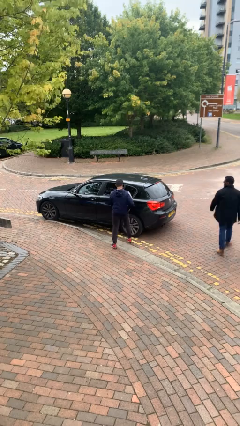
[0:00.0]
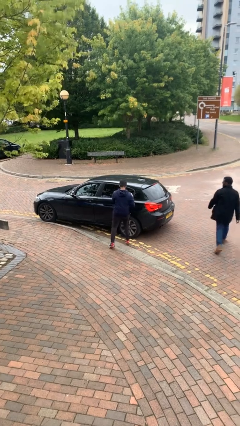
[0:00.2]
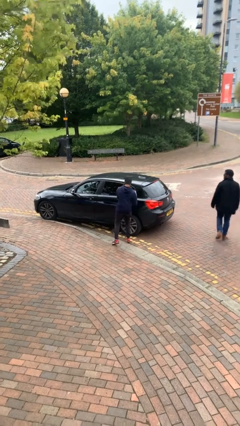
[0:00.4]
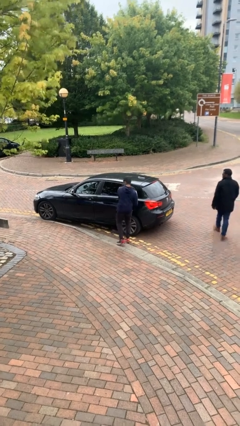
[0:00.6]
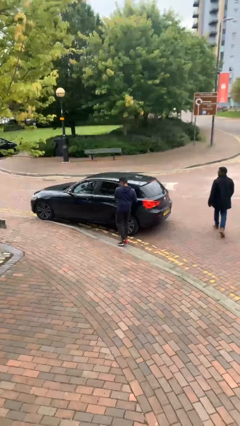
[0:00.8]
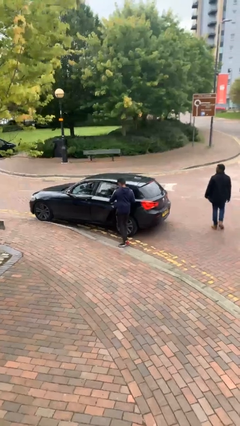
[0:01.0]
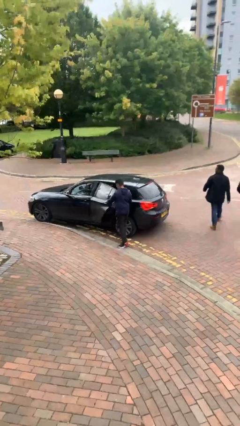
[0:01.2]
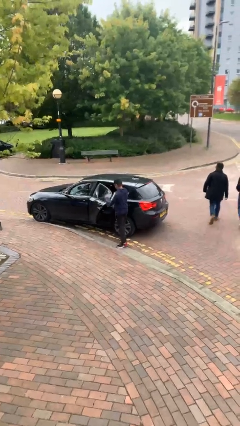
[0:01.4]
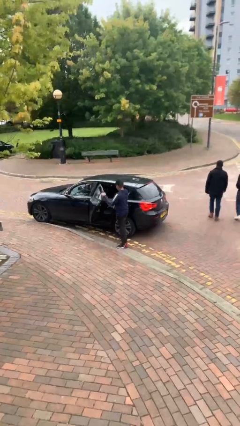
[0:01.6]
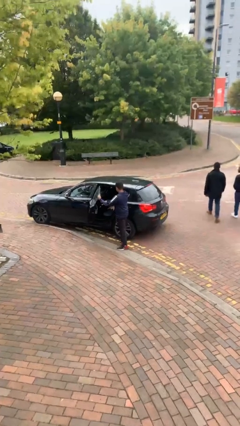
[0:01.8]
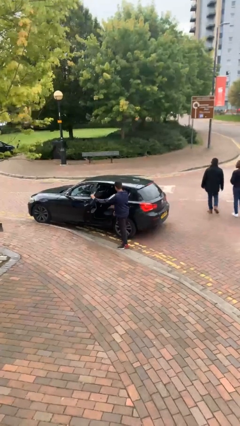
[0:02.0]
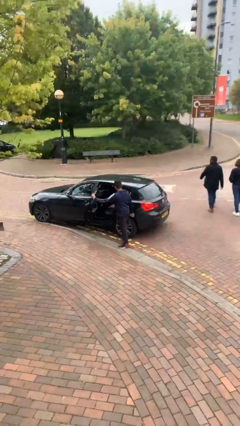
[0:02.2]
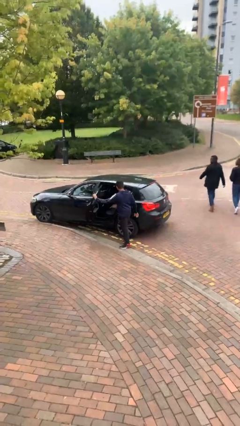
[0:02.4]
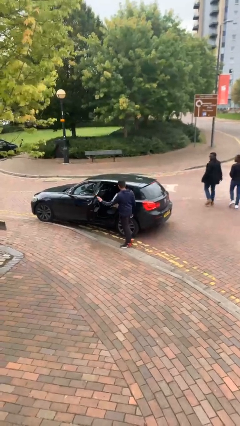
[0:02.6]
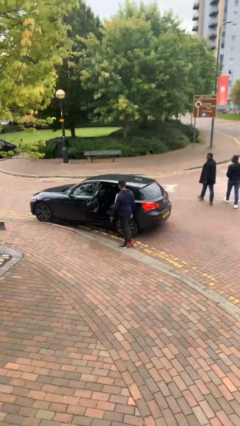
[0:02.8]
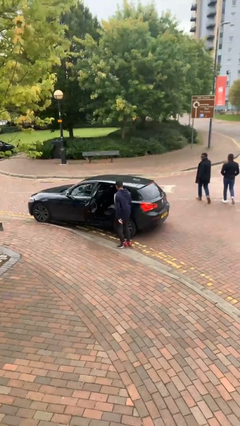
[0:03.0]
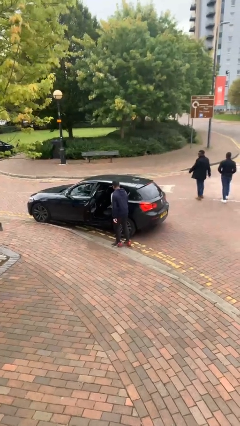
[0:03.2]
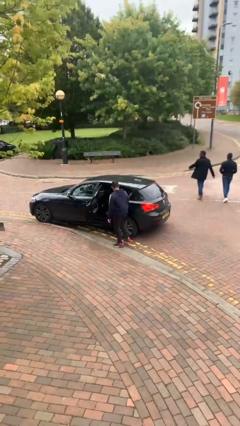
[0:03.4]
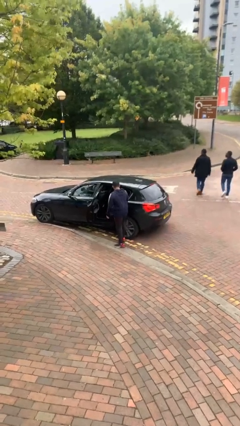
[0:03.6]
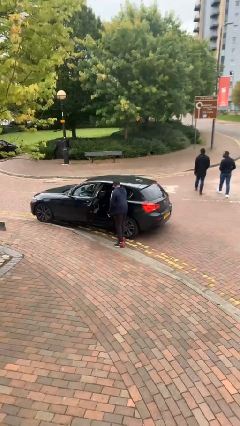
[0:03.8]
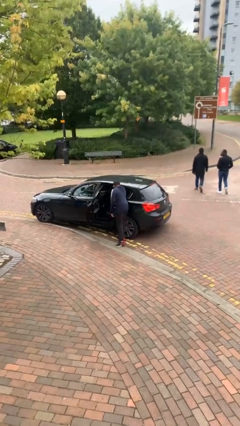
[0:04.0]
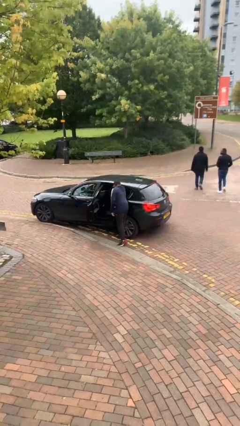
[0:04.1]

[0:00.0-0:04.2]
person opens car door

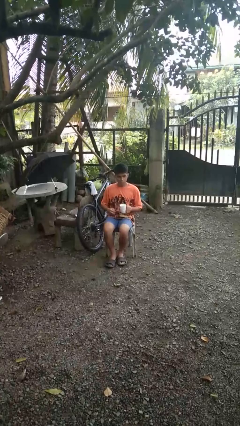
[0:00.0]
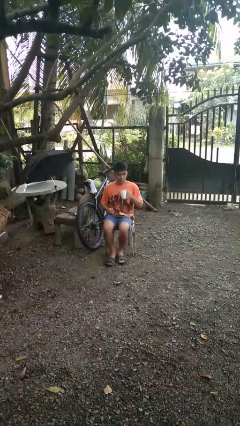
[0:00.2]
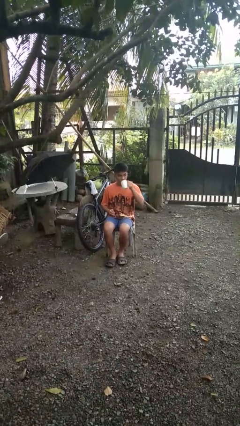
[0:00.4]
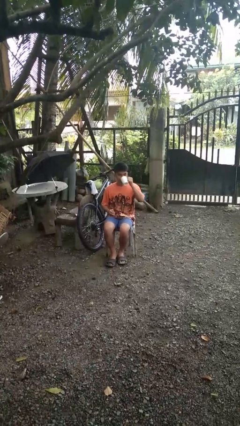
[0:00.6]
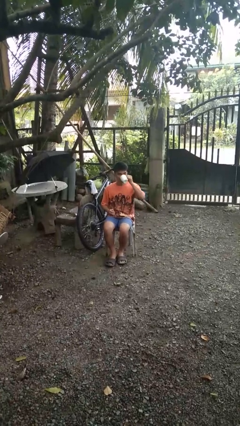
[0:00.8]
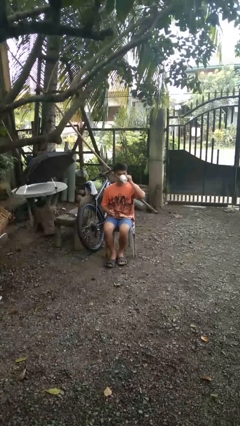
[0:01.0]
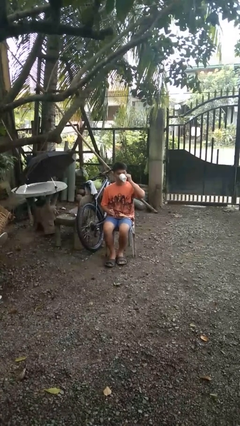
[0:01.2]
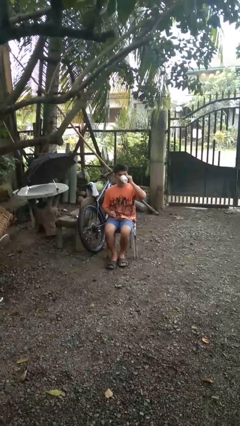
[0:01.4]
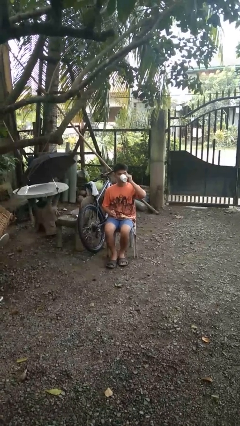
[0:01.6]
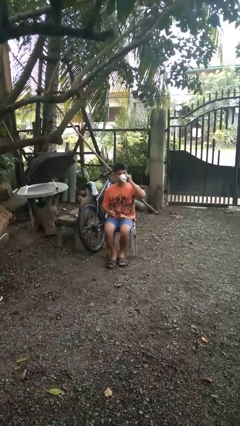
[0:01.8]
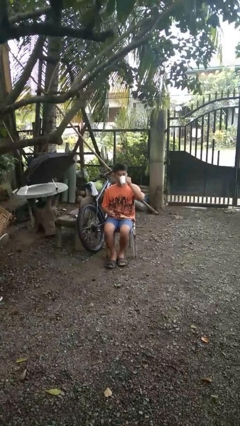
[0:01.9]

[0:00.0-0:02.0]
person drinks from mug

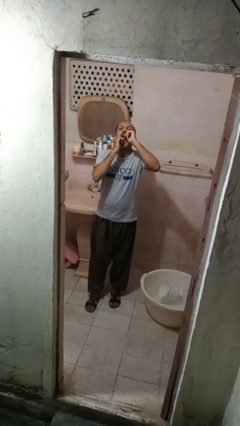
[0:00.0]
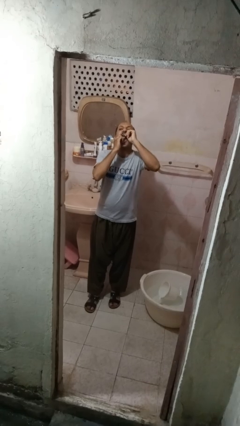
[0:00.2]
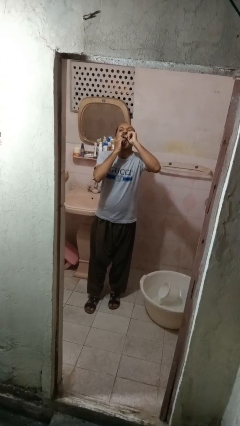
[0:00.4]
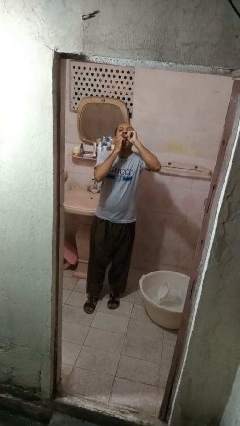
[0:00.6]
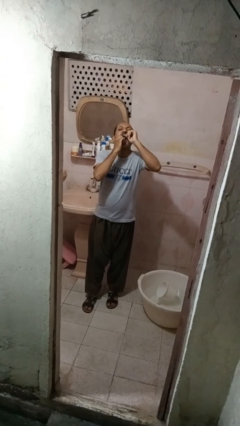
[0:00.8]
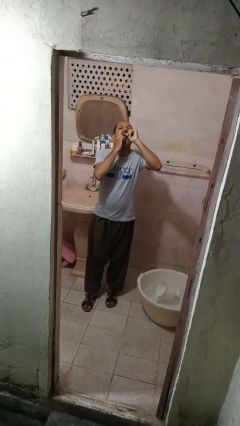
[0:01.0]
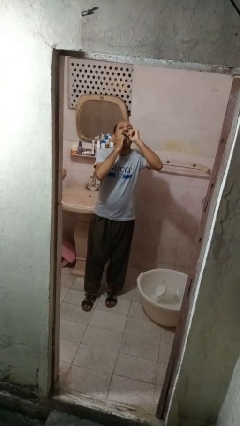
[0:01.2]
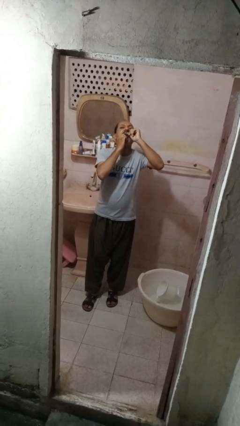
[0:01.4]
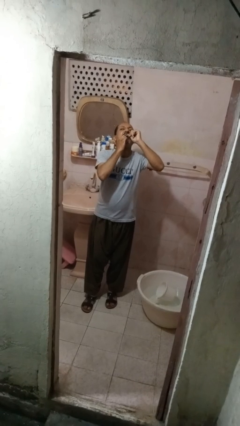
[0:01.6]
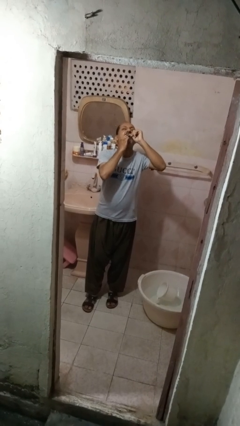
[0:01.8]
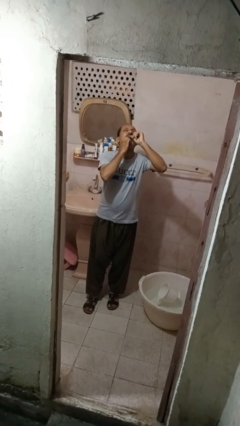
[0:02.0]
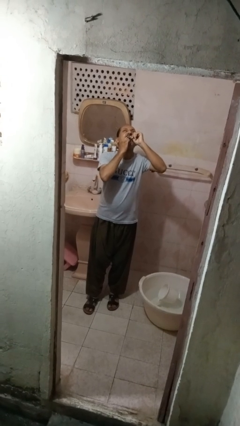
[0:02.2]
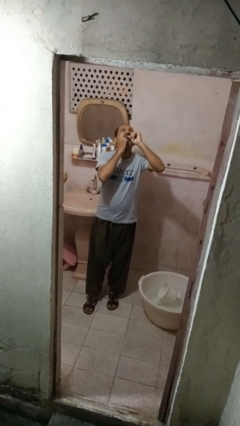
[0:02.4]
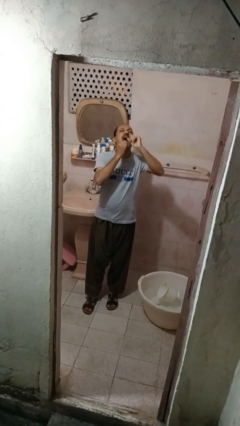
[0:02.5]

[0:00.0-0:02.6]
person flosses

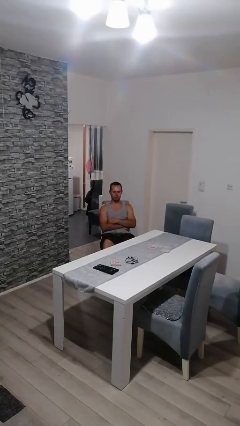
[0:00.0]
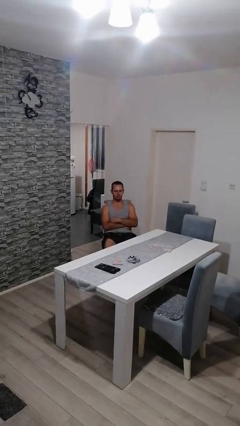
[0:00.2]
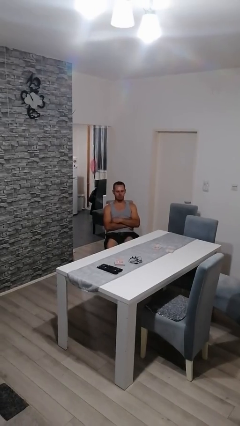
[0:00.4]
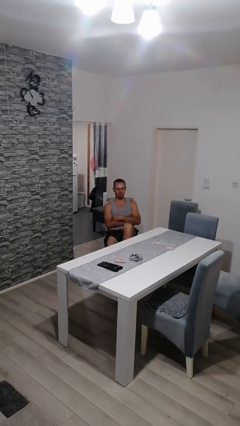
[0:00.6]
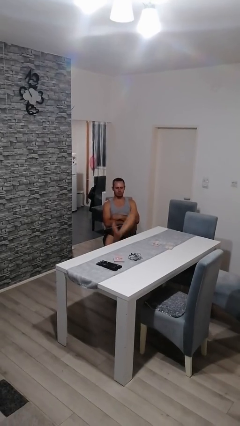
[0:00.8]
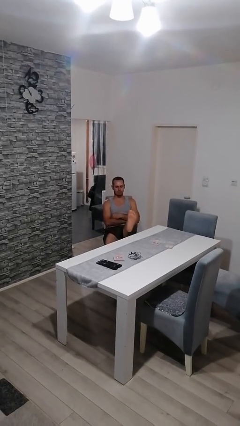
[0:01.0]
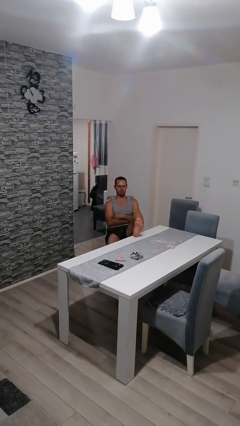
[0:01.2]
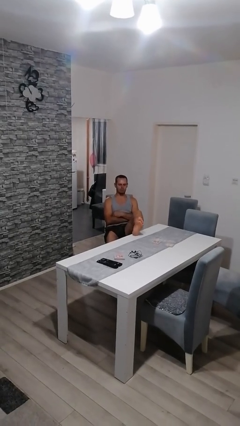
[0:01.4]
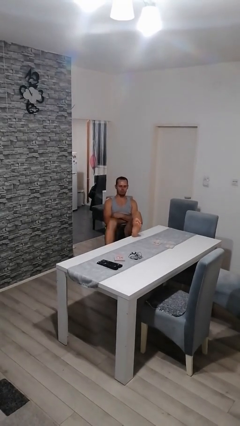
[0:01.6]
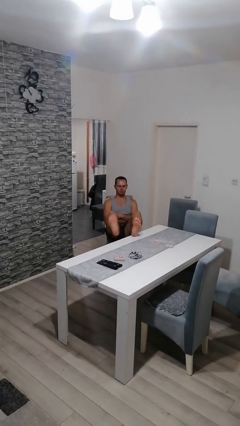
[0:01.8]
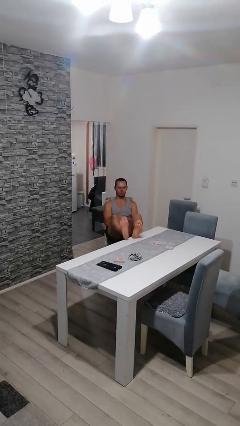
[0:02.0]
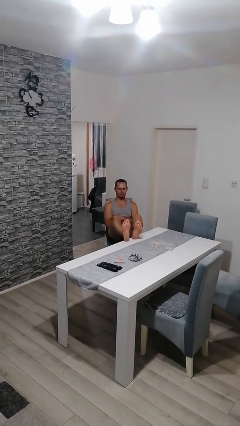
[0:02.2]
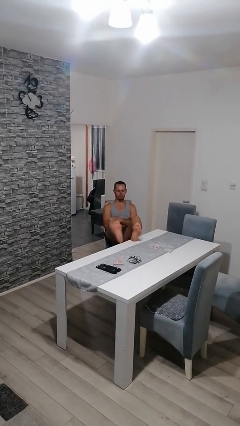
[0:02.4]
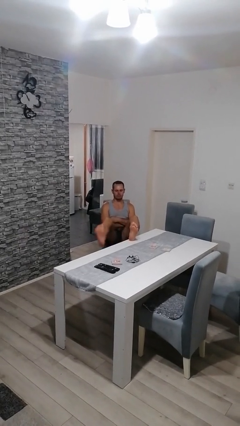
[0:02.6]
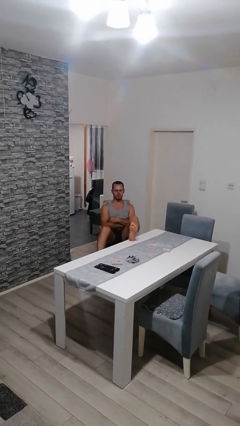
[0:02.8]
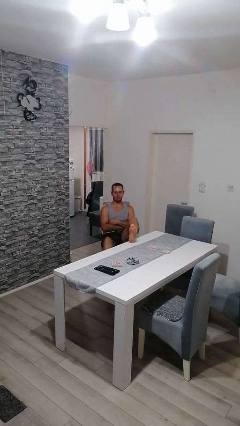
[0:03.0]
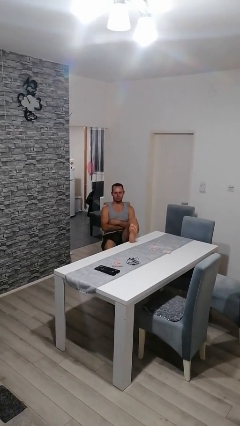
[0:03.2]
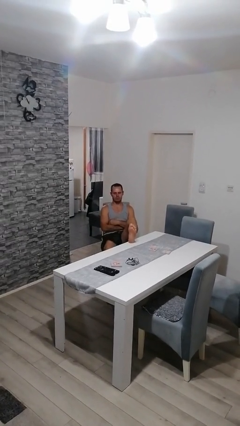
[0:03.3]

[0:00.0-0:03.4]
person puts feet up

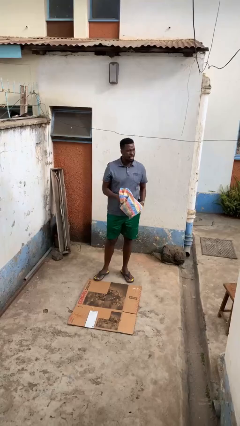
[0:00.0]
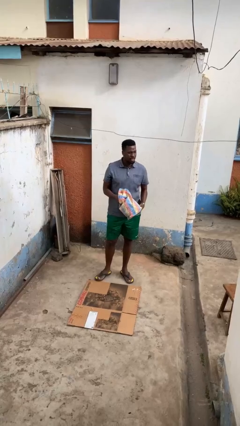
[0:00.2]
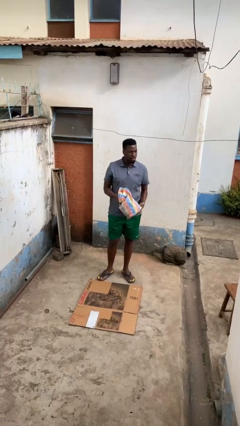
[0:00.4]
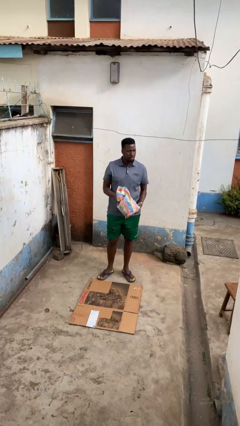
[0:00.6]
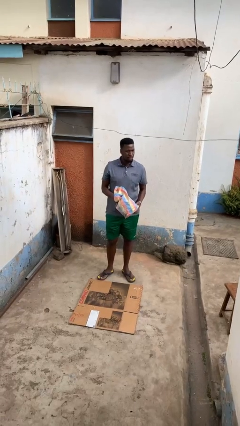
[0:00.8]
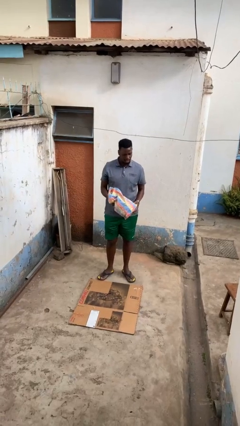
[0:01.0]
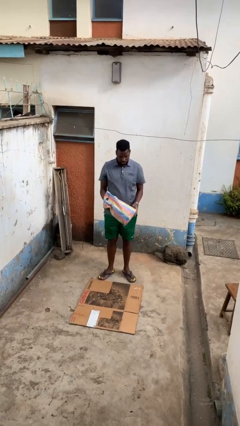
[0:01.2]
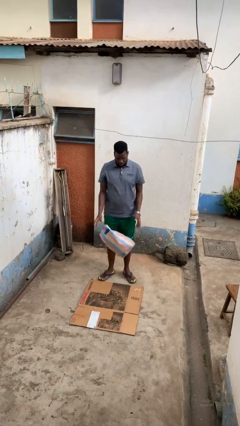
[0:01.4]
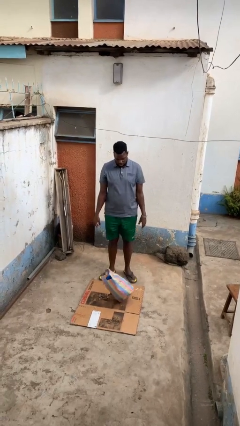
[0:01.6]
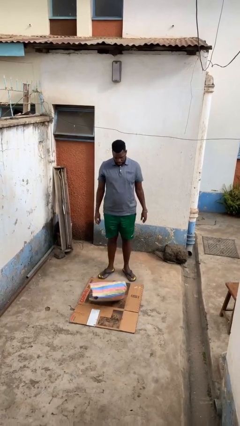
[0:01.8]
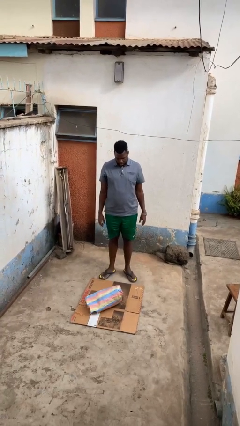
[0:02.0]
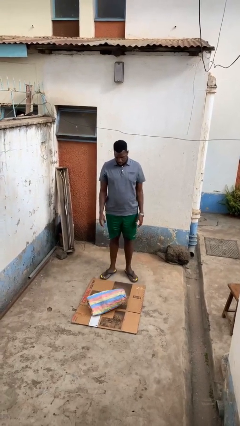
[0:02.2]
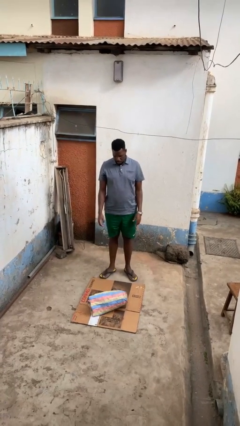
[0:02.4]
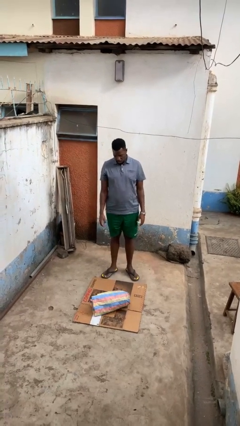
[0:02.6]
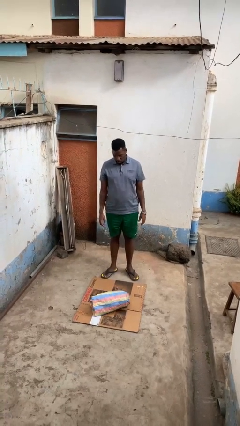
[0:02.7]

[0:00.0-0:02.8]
person drops object

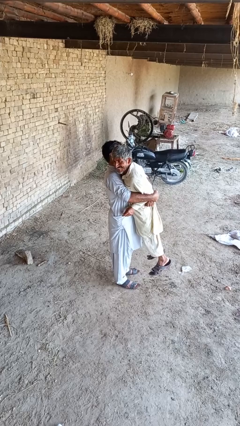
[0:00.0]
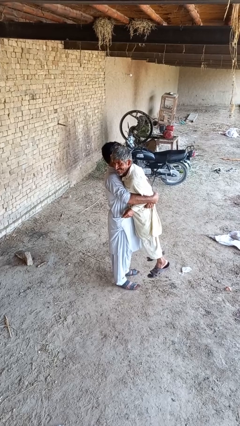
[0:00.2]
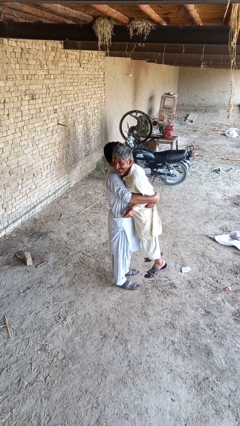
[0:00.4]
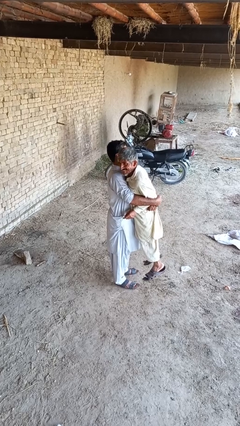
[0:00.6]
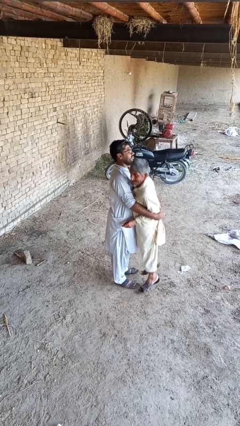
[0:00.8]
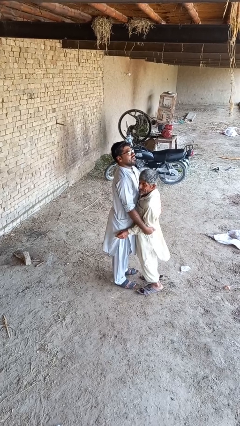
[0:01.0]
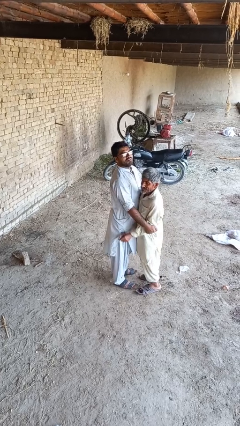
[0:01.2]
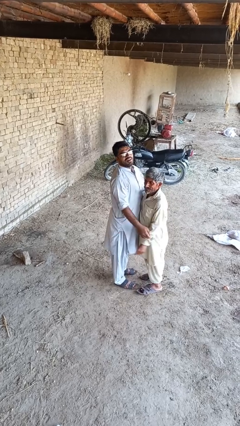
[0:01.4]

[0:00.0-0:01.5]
person puts down person

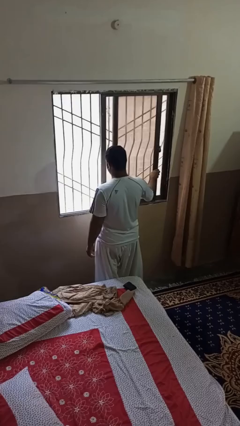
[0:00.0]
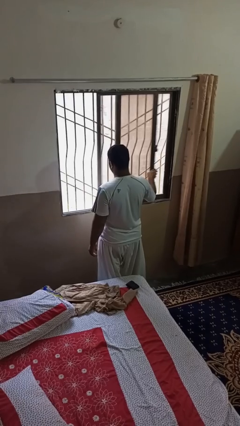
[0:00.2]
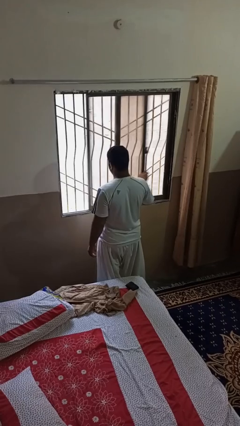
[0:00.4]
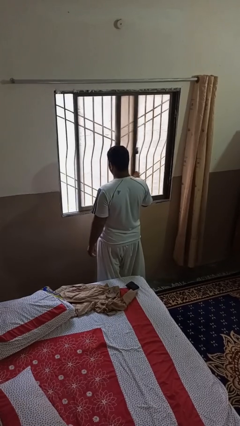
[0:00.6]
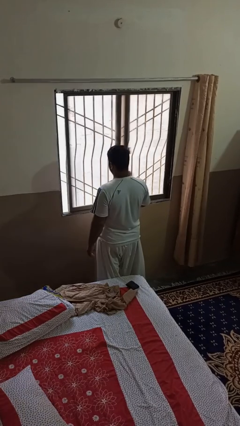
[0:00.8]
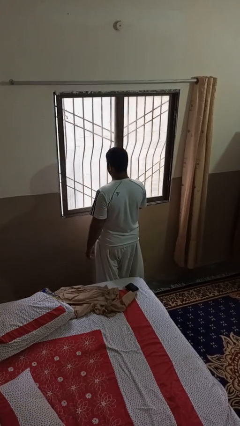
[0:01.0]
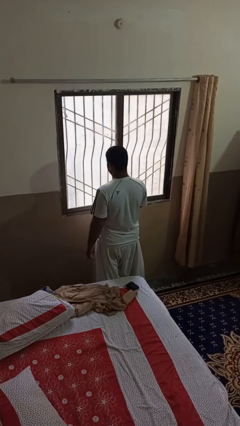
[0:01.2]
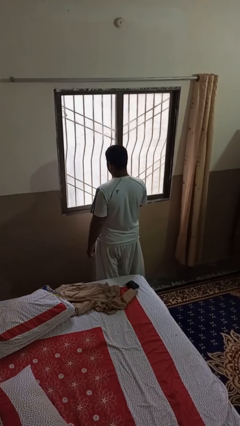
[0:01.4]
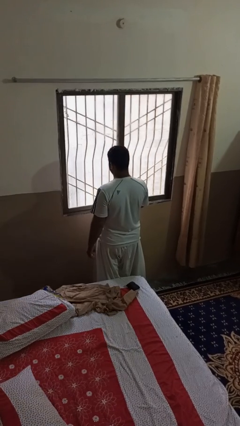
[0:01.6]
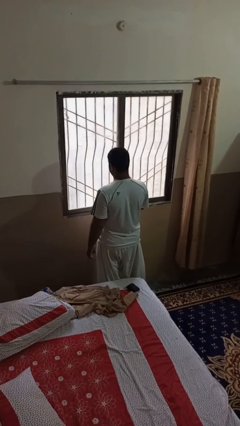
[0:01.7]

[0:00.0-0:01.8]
person closes home window
